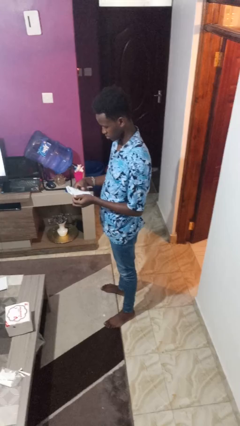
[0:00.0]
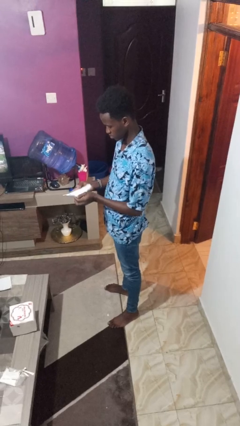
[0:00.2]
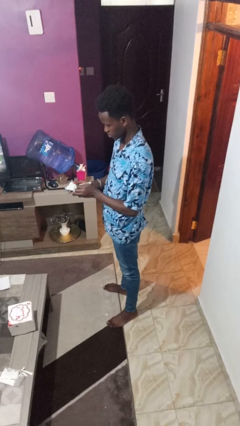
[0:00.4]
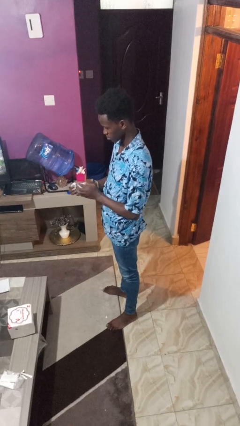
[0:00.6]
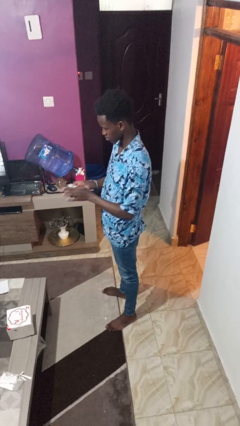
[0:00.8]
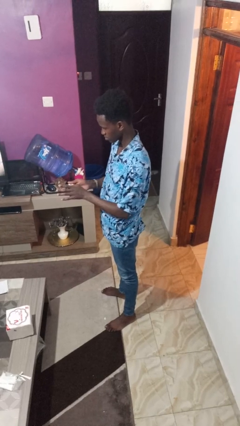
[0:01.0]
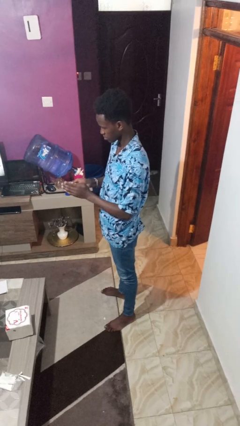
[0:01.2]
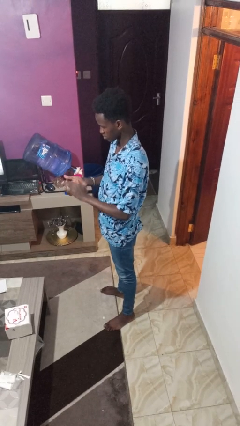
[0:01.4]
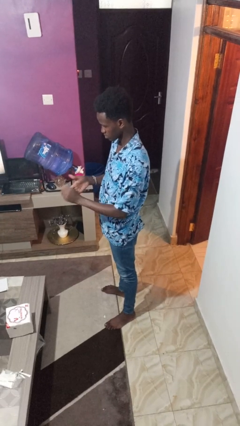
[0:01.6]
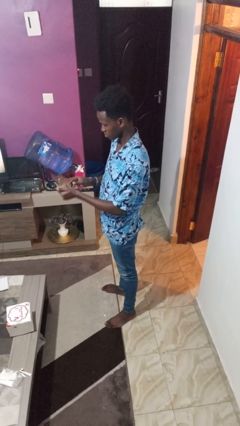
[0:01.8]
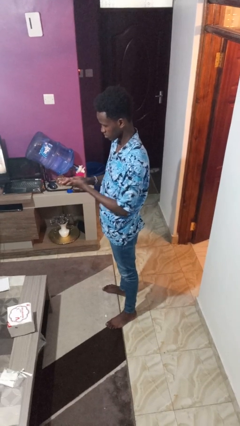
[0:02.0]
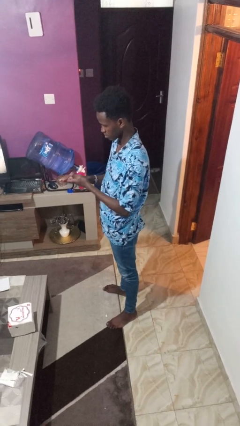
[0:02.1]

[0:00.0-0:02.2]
person crumples paper

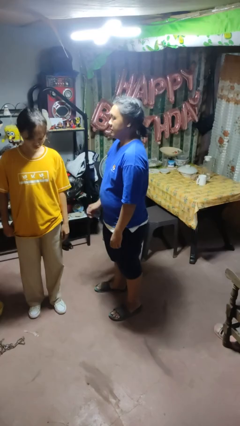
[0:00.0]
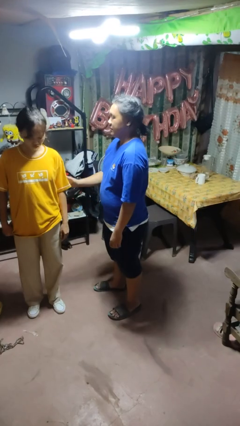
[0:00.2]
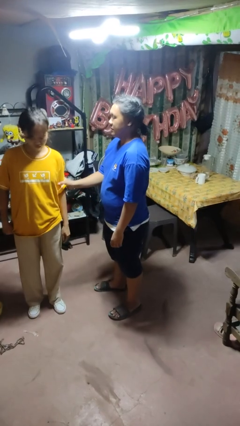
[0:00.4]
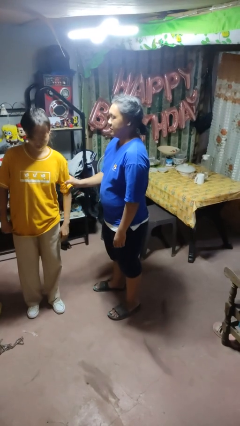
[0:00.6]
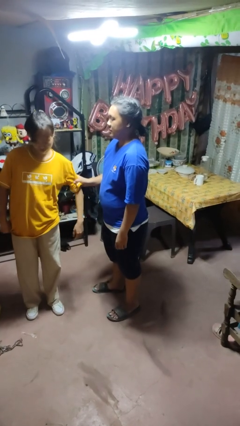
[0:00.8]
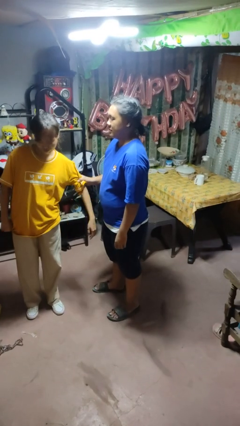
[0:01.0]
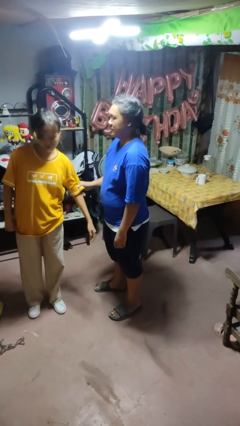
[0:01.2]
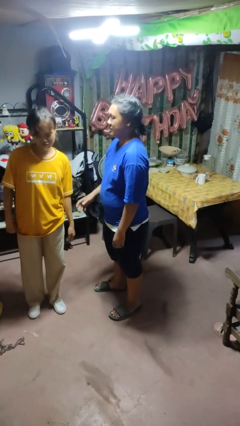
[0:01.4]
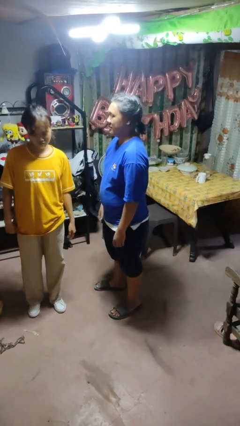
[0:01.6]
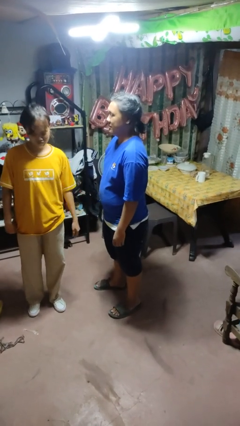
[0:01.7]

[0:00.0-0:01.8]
person grabs person by bicep

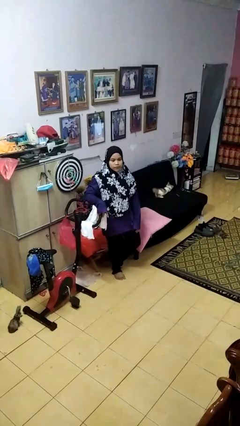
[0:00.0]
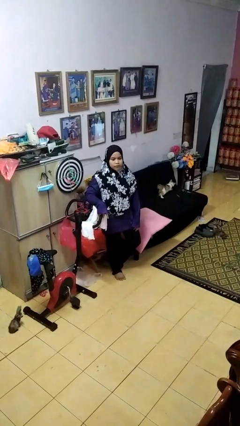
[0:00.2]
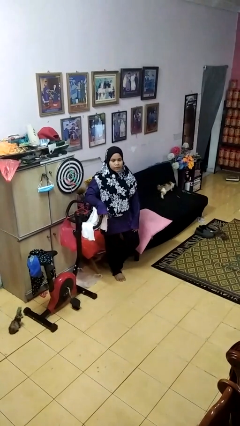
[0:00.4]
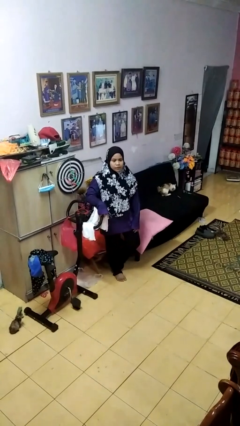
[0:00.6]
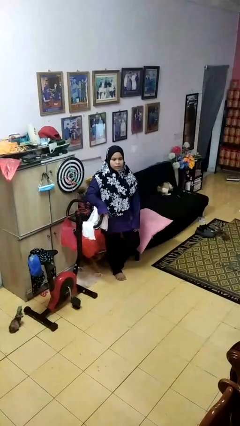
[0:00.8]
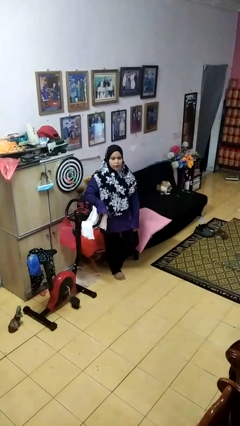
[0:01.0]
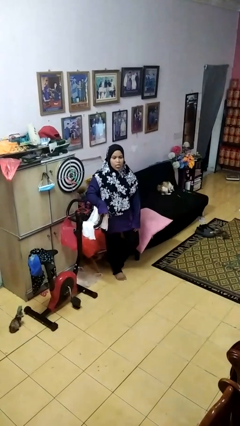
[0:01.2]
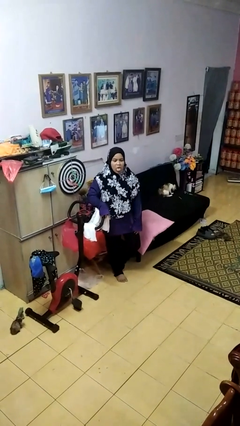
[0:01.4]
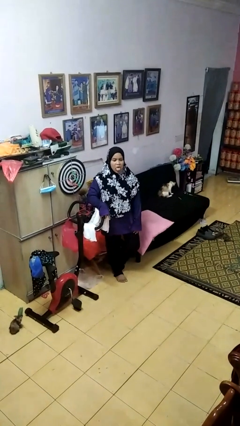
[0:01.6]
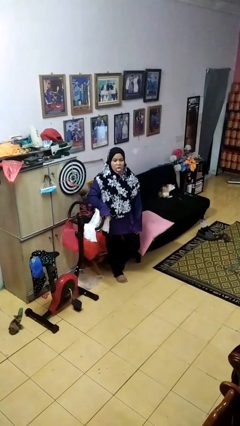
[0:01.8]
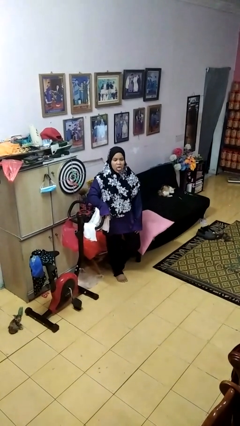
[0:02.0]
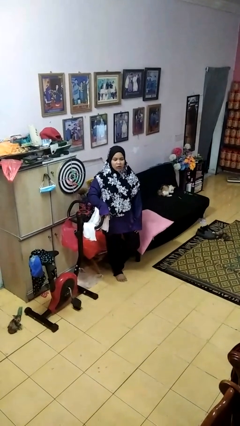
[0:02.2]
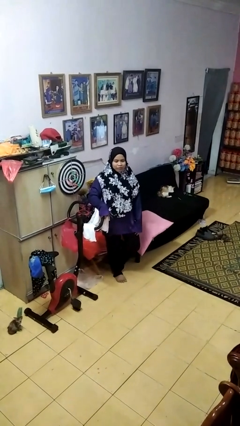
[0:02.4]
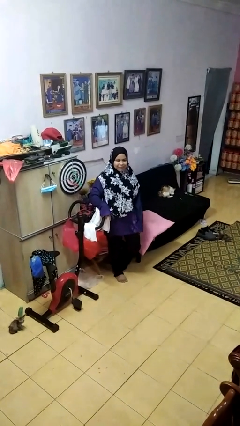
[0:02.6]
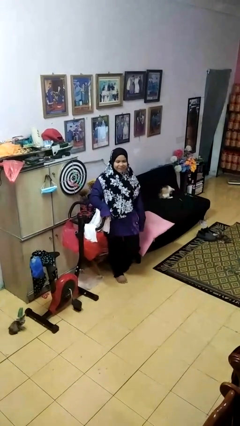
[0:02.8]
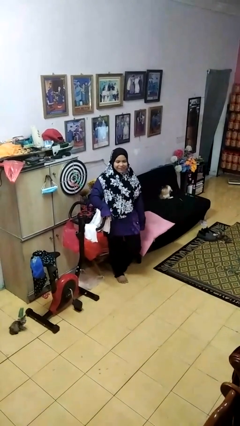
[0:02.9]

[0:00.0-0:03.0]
person sticks out tongue

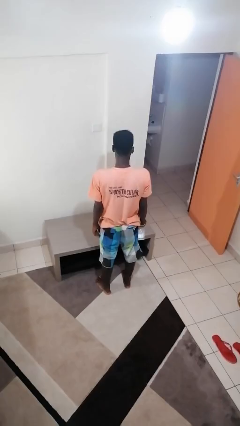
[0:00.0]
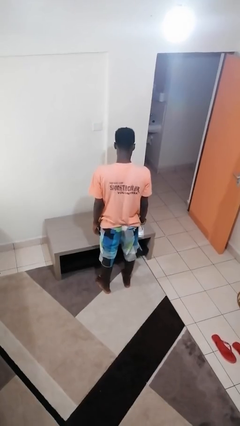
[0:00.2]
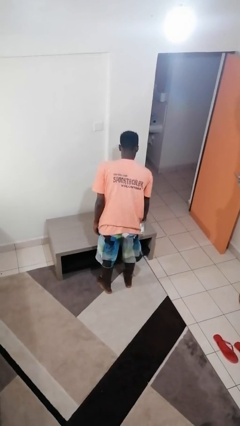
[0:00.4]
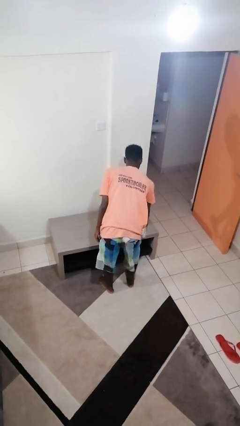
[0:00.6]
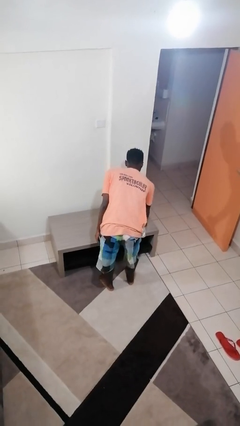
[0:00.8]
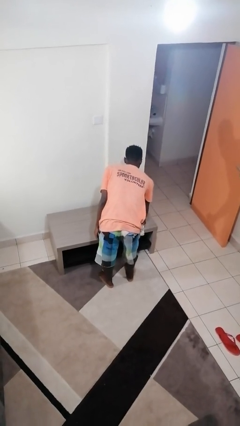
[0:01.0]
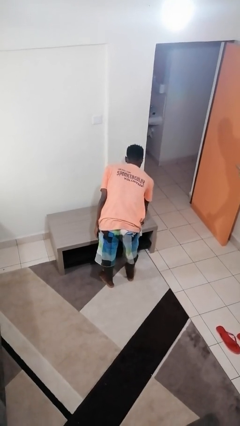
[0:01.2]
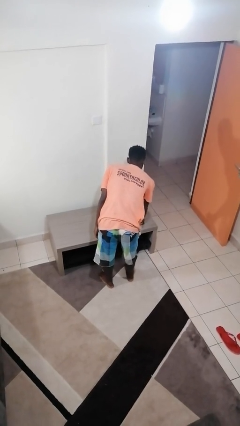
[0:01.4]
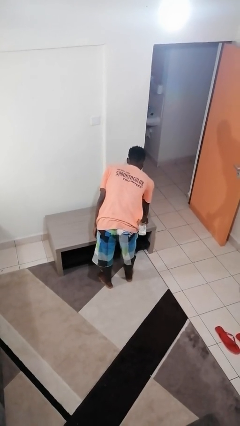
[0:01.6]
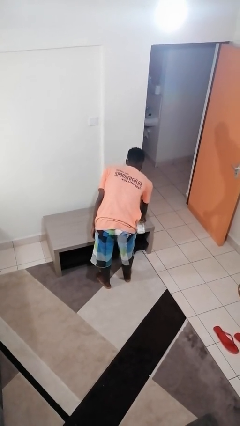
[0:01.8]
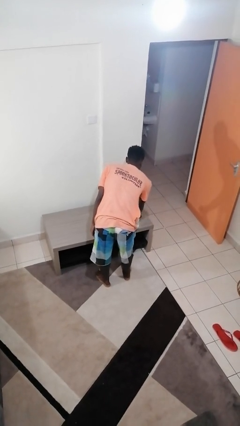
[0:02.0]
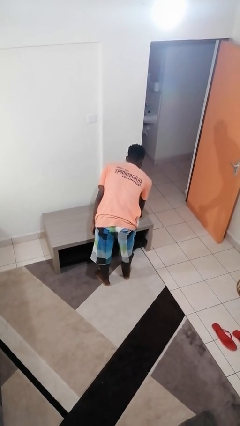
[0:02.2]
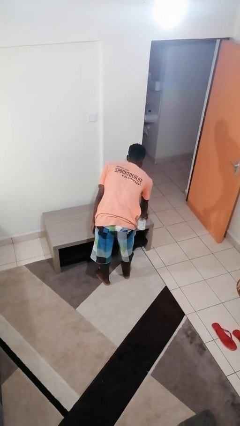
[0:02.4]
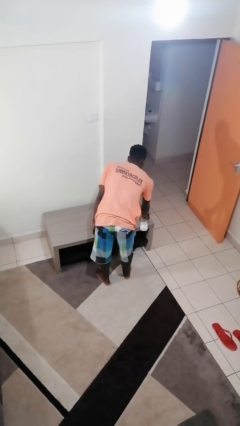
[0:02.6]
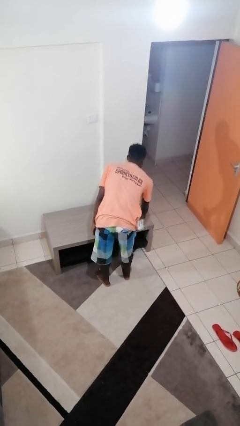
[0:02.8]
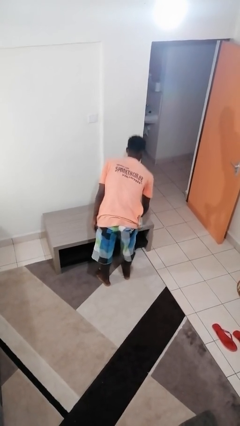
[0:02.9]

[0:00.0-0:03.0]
person sprays from bottle

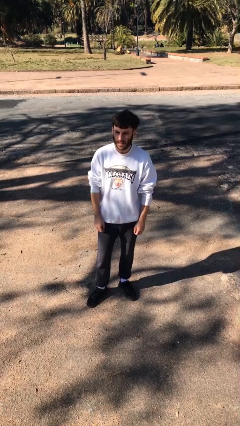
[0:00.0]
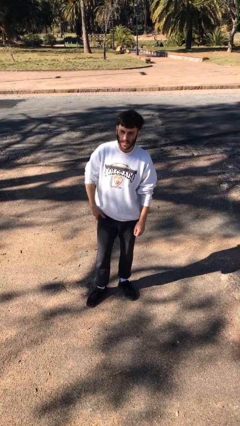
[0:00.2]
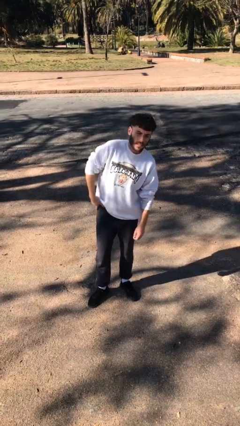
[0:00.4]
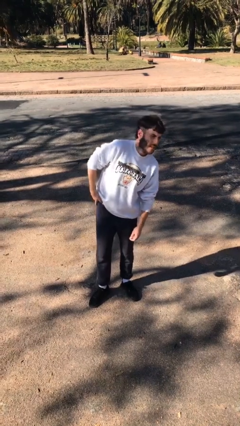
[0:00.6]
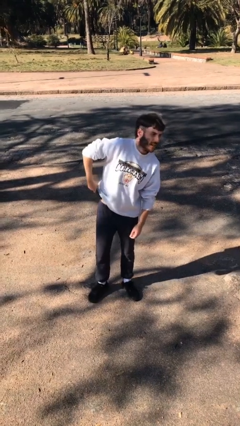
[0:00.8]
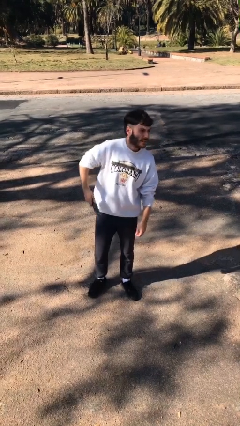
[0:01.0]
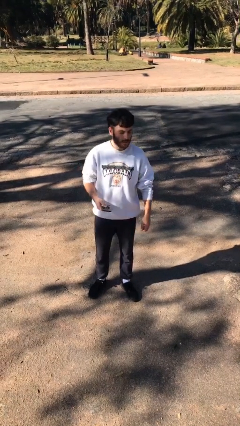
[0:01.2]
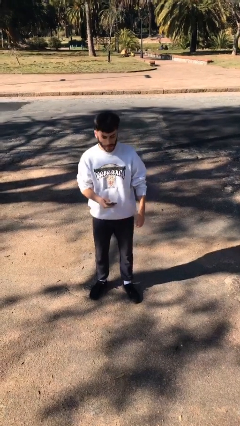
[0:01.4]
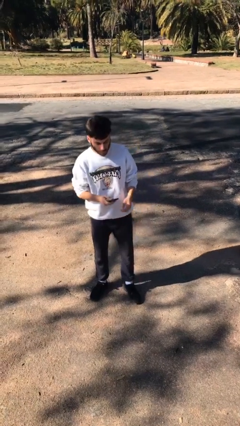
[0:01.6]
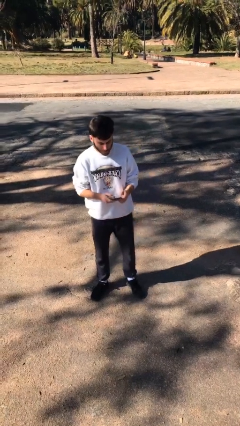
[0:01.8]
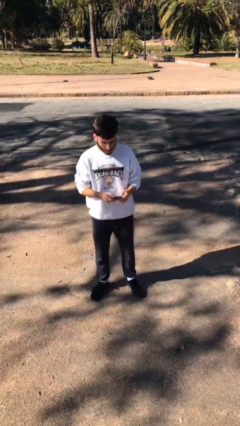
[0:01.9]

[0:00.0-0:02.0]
person takes phone from pocket

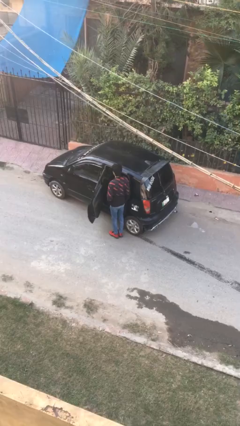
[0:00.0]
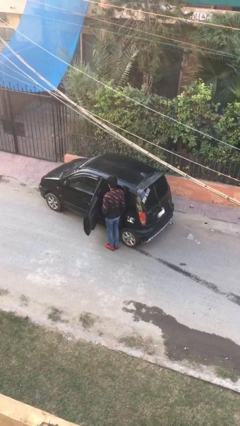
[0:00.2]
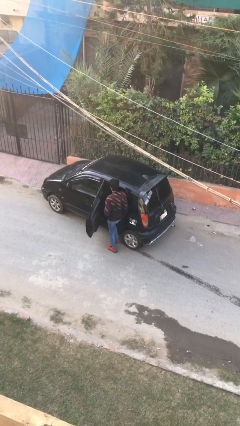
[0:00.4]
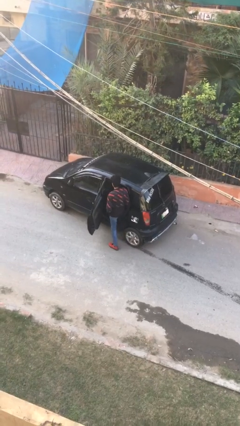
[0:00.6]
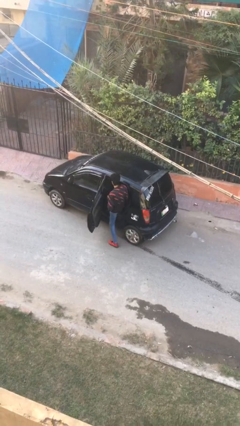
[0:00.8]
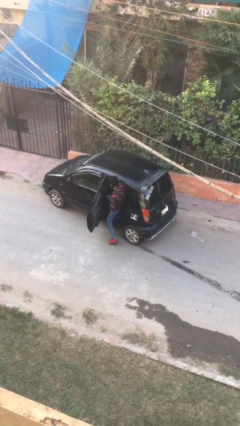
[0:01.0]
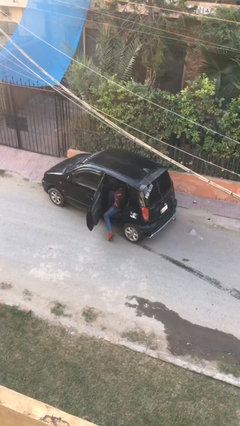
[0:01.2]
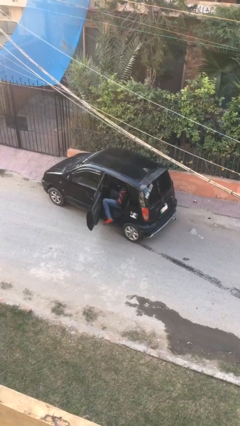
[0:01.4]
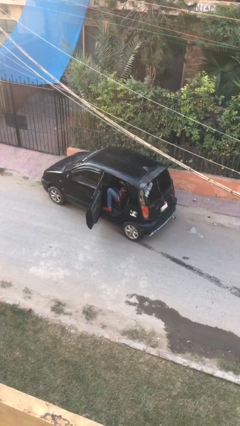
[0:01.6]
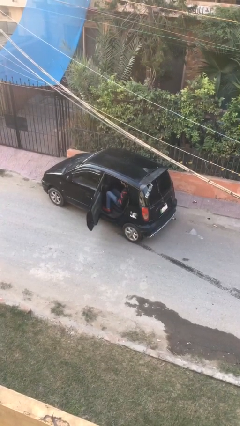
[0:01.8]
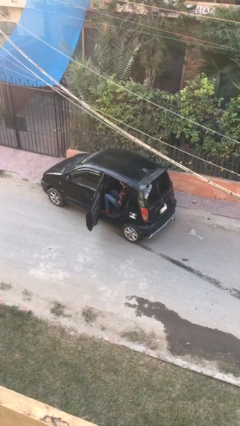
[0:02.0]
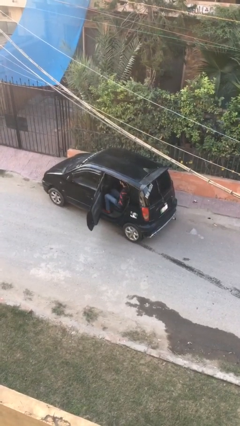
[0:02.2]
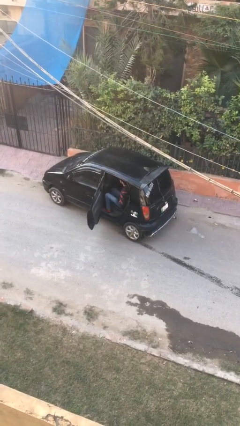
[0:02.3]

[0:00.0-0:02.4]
person enters car

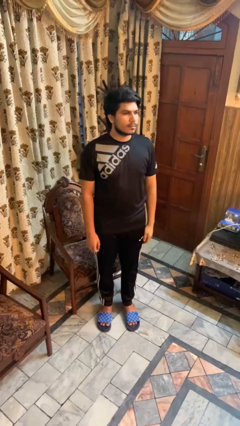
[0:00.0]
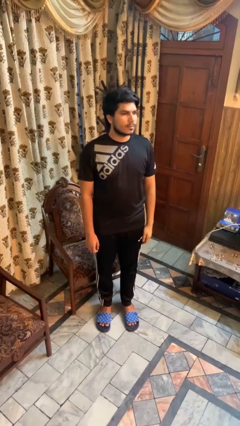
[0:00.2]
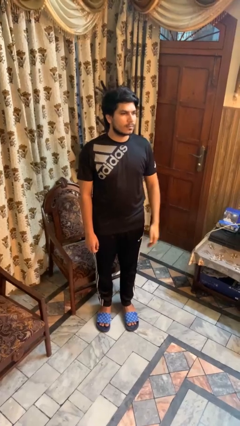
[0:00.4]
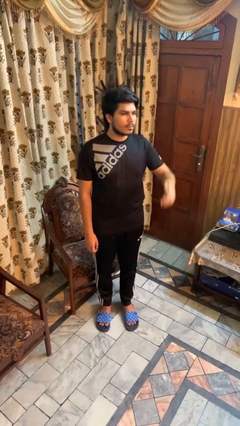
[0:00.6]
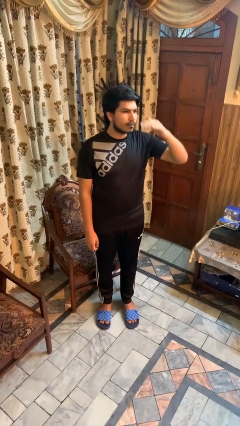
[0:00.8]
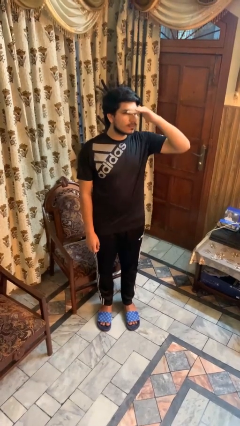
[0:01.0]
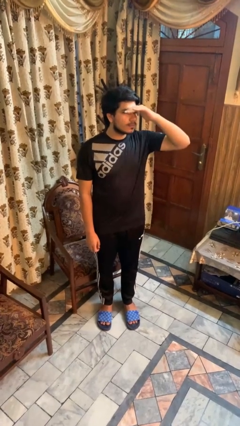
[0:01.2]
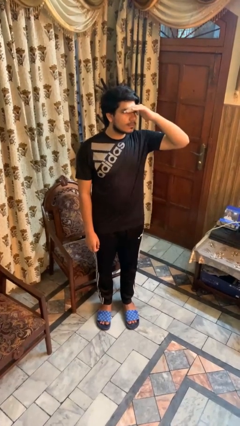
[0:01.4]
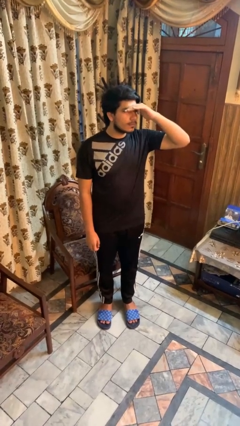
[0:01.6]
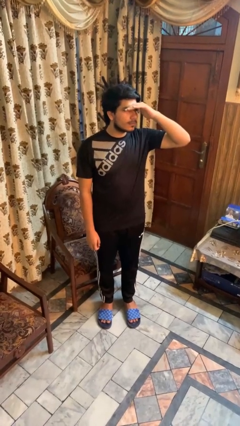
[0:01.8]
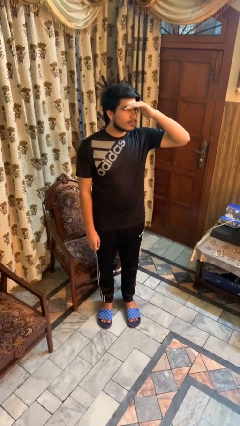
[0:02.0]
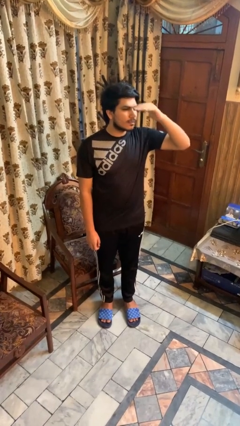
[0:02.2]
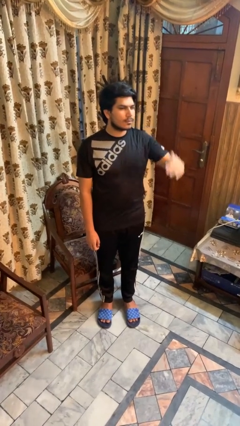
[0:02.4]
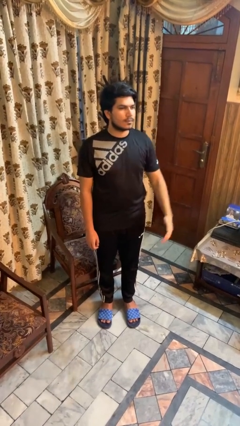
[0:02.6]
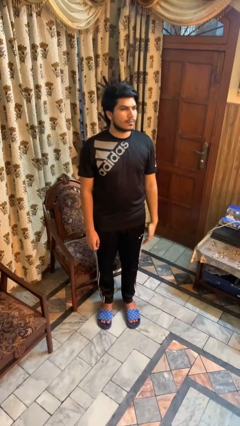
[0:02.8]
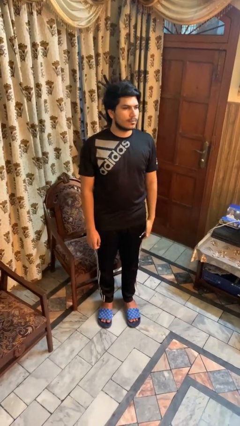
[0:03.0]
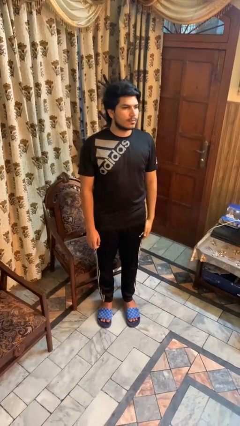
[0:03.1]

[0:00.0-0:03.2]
person shades eyes
